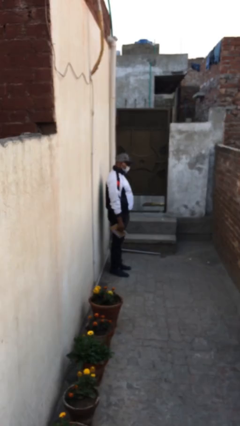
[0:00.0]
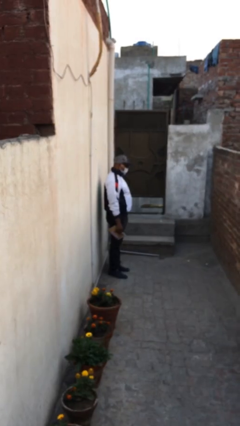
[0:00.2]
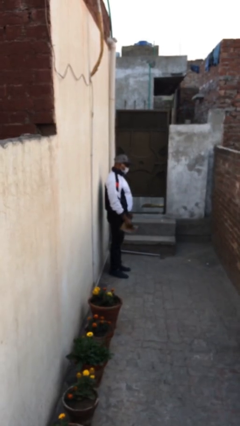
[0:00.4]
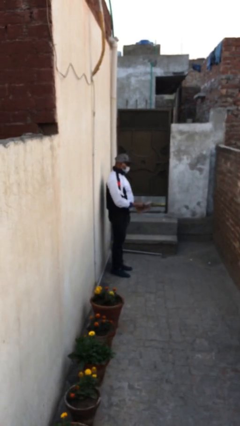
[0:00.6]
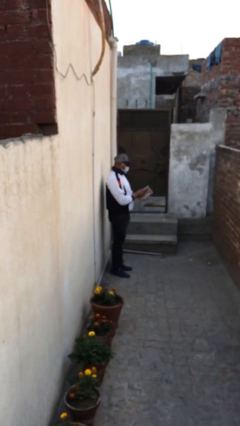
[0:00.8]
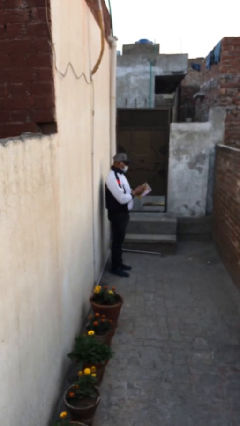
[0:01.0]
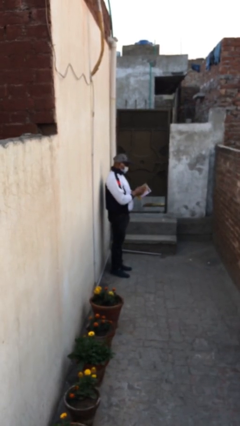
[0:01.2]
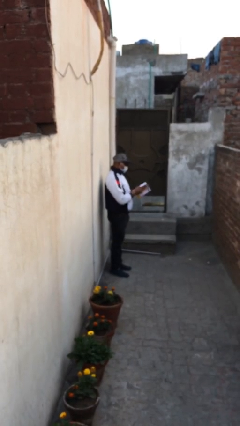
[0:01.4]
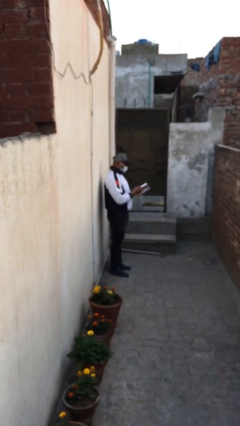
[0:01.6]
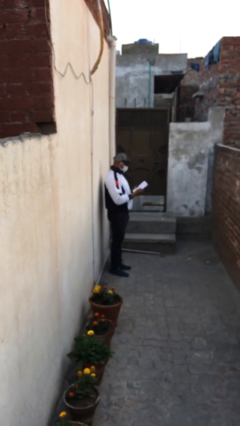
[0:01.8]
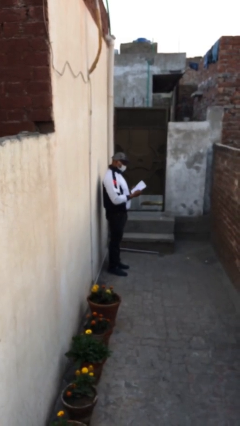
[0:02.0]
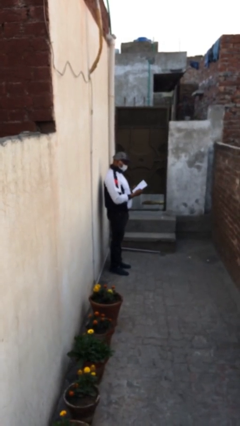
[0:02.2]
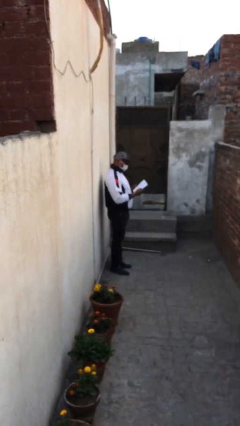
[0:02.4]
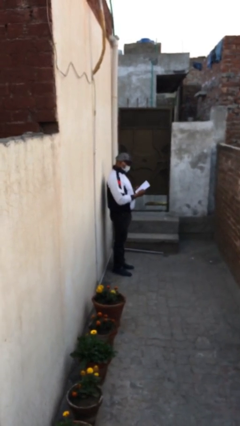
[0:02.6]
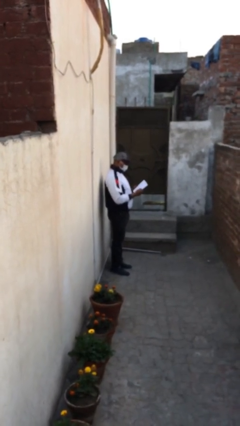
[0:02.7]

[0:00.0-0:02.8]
person reads document

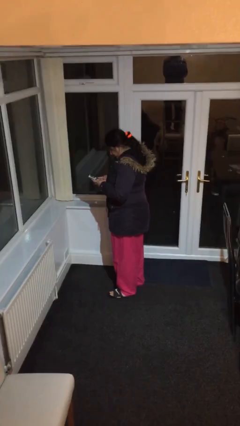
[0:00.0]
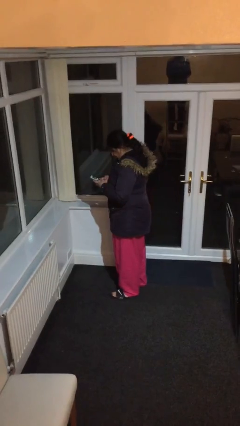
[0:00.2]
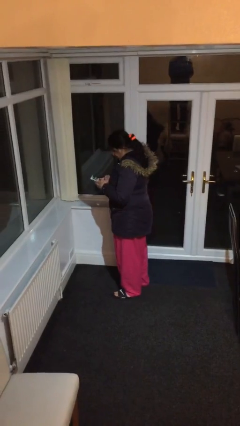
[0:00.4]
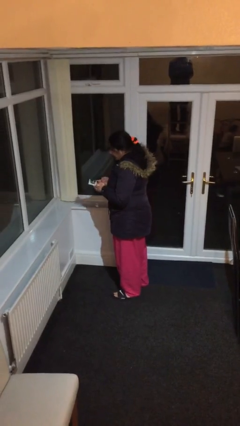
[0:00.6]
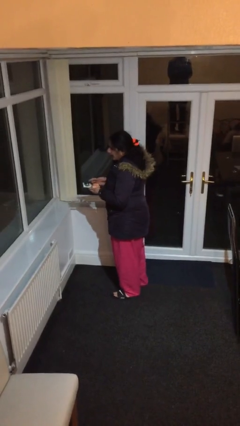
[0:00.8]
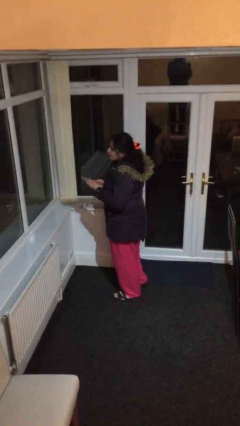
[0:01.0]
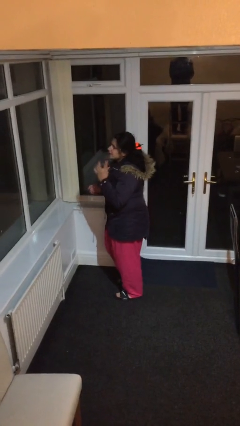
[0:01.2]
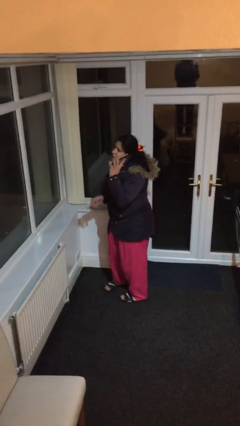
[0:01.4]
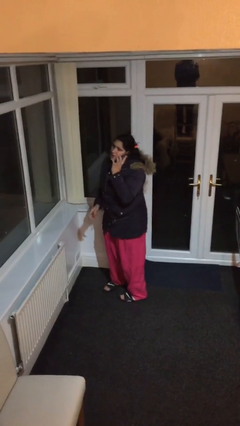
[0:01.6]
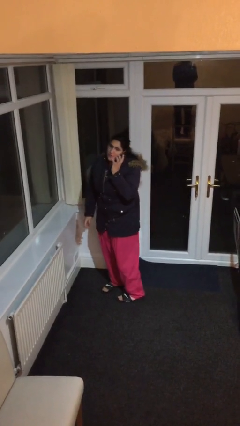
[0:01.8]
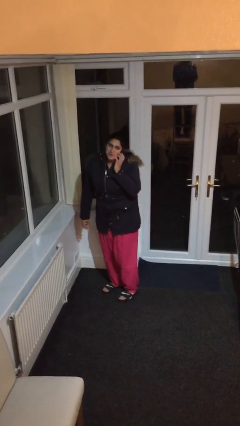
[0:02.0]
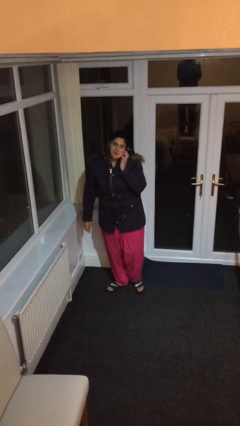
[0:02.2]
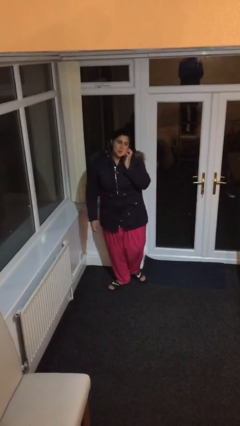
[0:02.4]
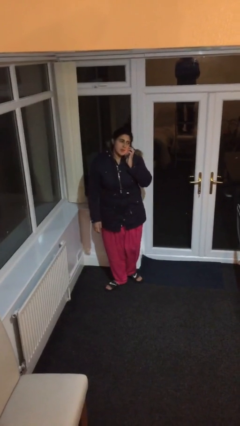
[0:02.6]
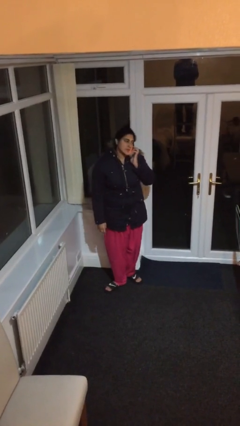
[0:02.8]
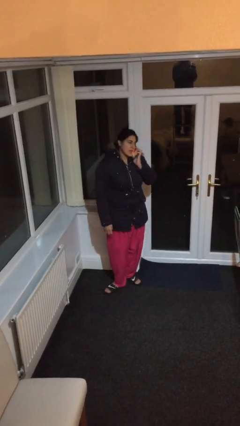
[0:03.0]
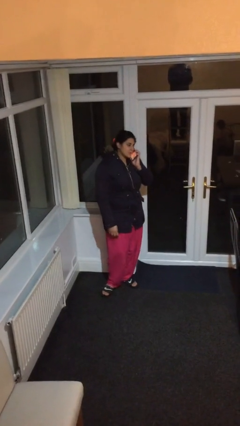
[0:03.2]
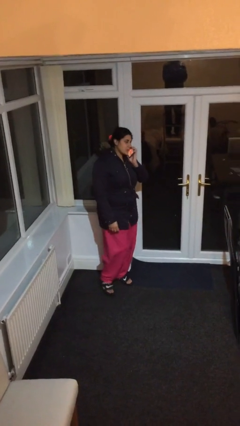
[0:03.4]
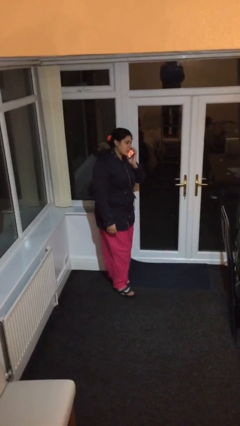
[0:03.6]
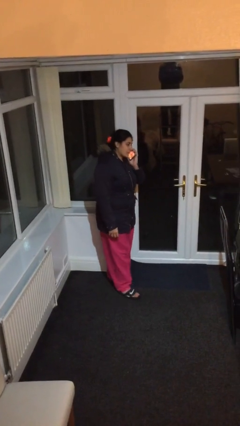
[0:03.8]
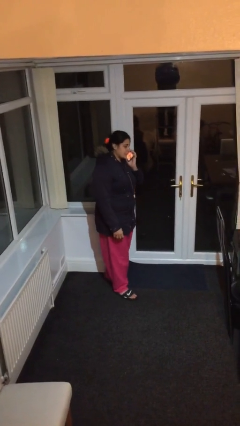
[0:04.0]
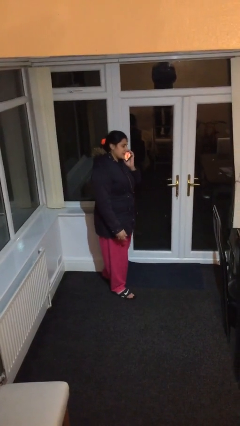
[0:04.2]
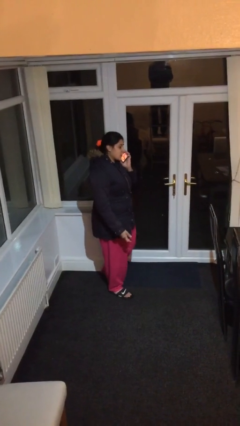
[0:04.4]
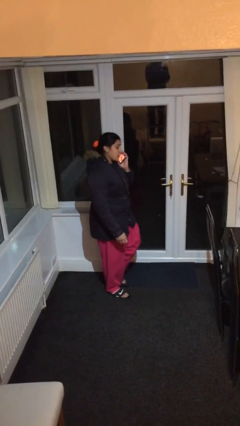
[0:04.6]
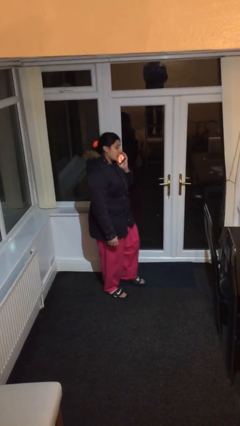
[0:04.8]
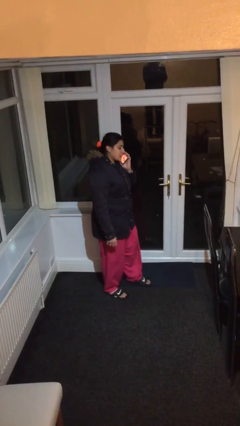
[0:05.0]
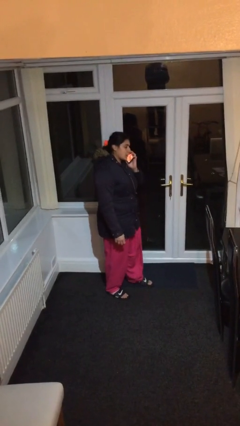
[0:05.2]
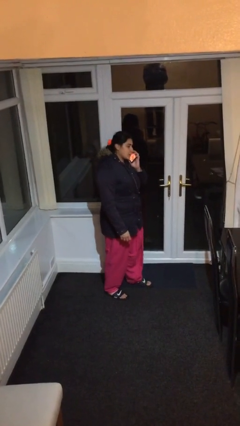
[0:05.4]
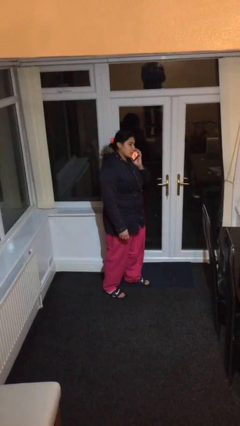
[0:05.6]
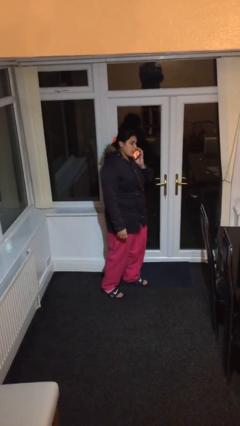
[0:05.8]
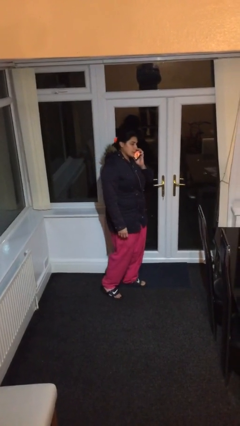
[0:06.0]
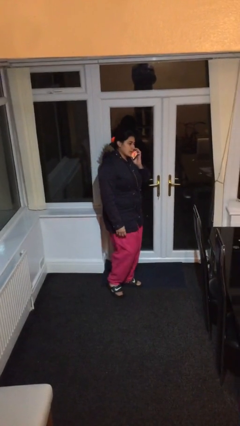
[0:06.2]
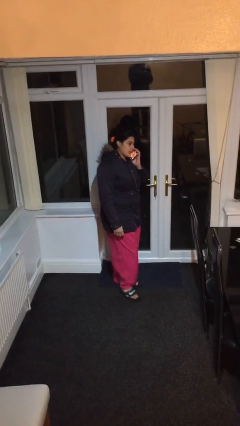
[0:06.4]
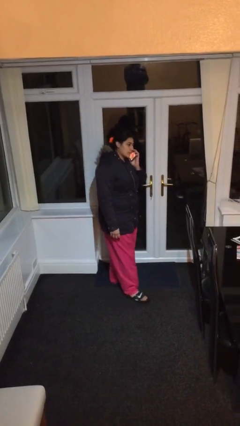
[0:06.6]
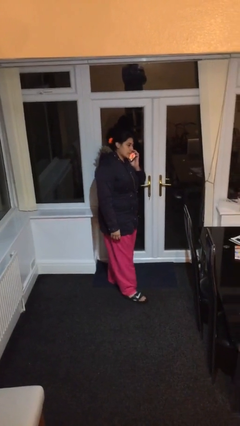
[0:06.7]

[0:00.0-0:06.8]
person talks on phone

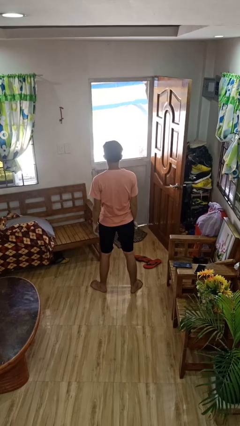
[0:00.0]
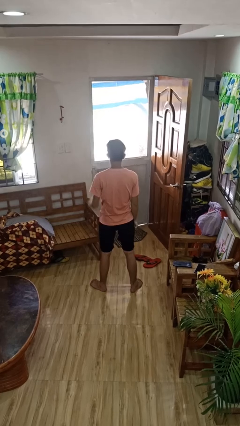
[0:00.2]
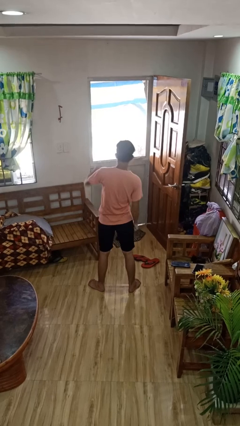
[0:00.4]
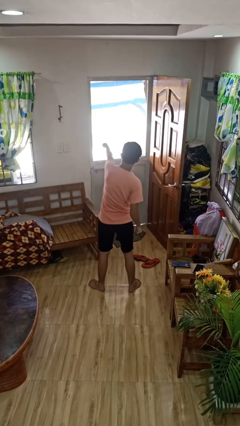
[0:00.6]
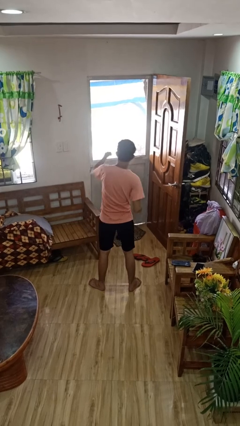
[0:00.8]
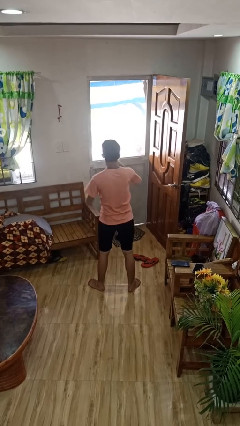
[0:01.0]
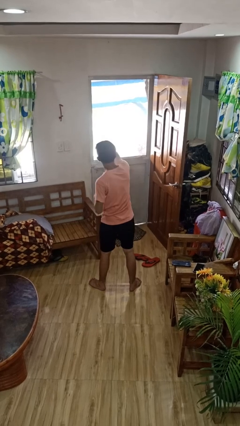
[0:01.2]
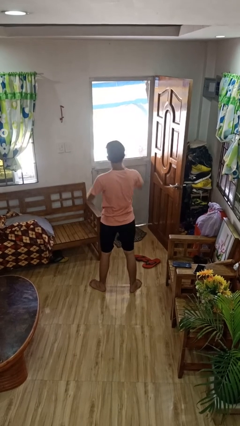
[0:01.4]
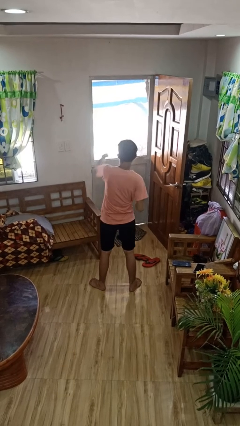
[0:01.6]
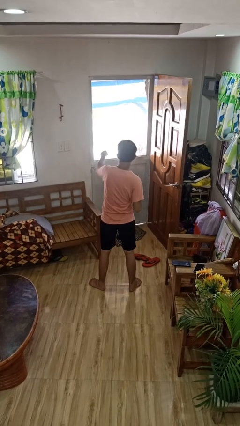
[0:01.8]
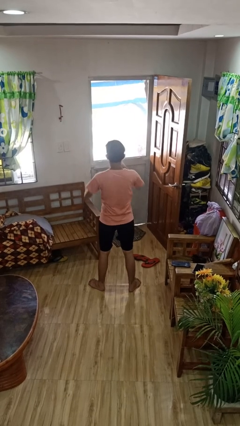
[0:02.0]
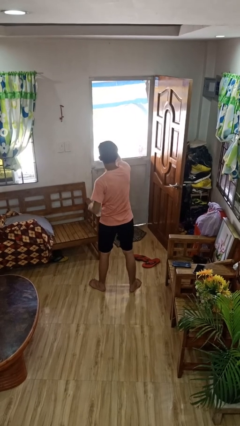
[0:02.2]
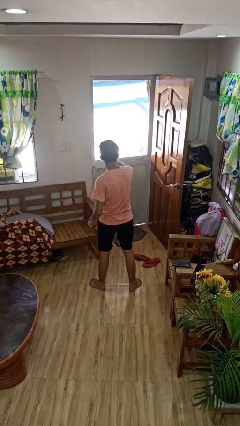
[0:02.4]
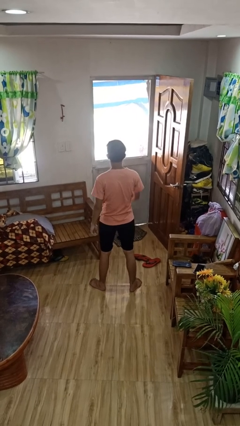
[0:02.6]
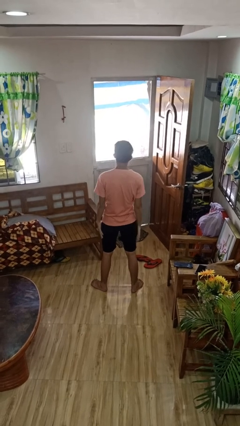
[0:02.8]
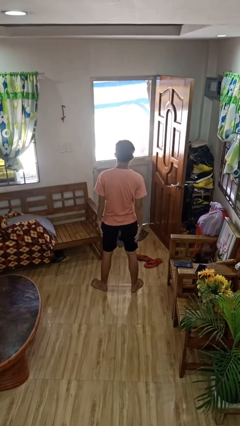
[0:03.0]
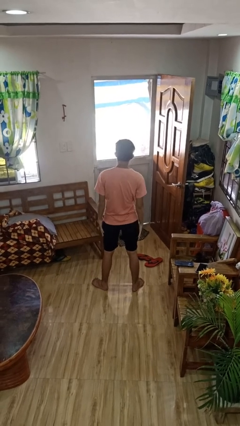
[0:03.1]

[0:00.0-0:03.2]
person punches

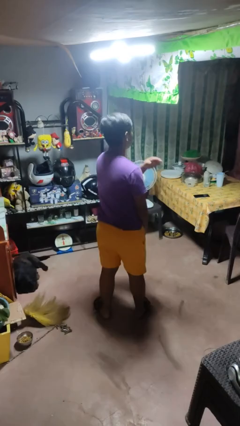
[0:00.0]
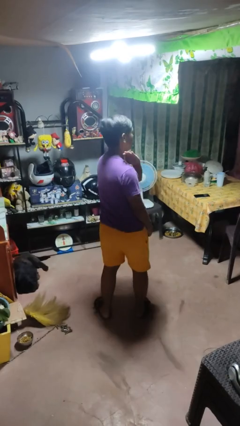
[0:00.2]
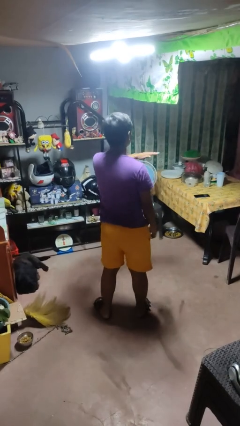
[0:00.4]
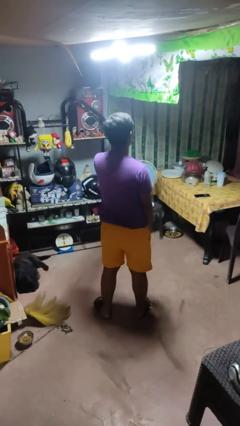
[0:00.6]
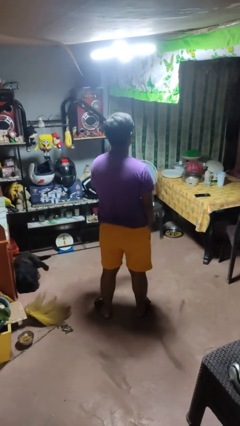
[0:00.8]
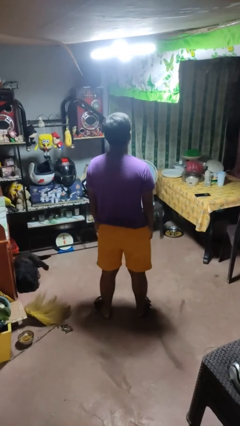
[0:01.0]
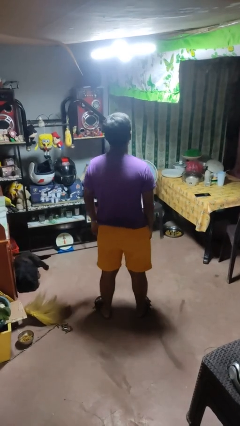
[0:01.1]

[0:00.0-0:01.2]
person karate chop

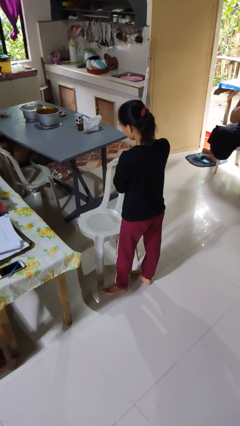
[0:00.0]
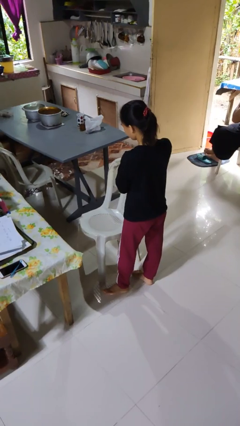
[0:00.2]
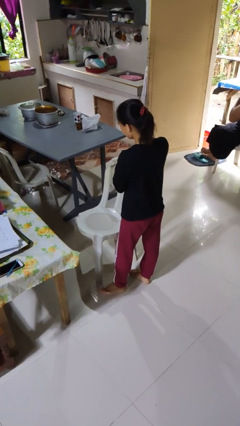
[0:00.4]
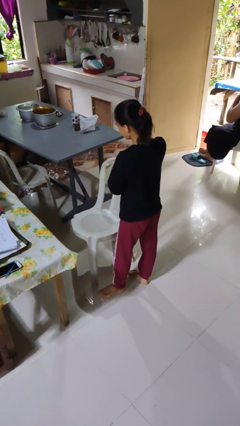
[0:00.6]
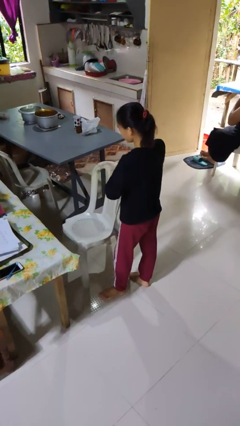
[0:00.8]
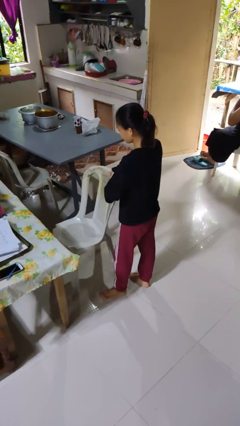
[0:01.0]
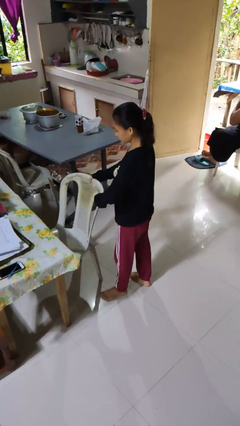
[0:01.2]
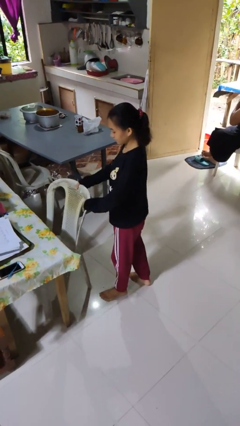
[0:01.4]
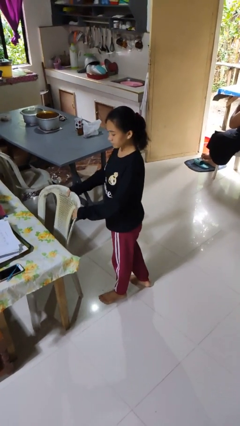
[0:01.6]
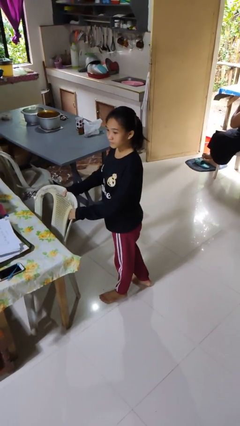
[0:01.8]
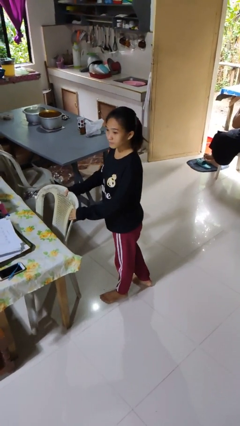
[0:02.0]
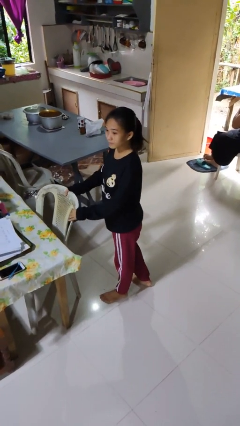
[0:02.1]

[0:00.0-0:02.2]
person pushes in chair

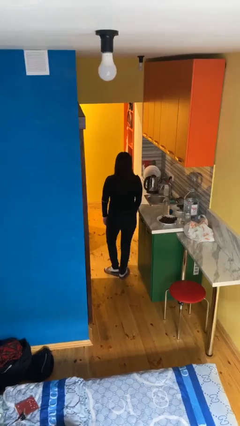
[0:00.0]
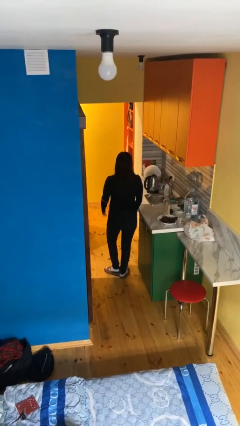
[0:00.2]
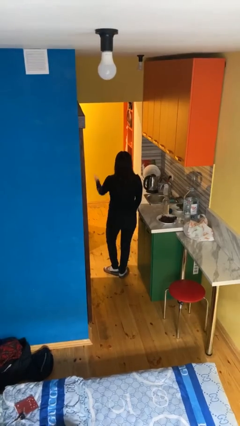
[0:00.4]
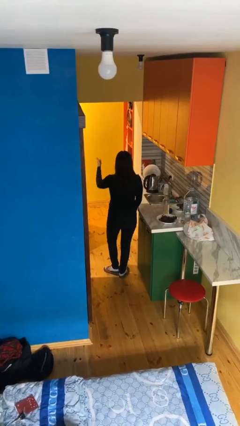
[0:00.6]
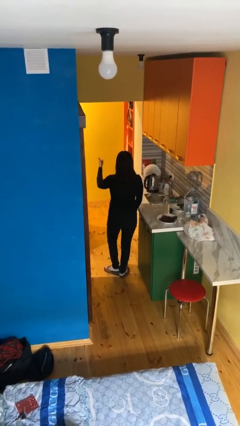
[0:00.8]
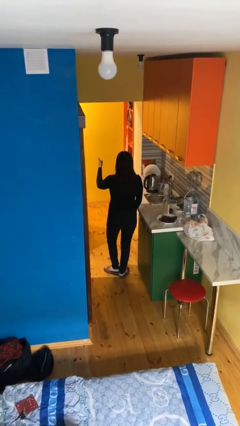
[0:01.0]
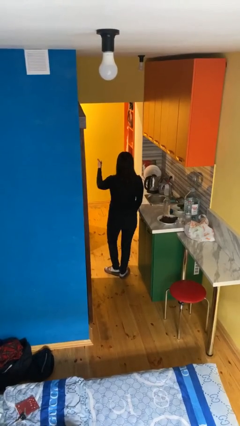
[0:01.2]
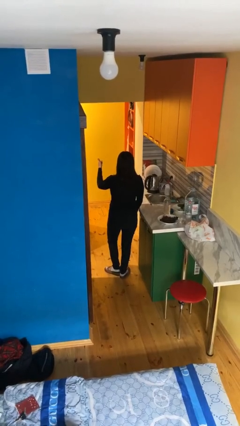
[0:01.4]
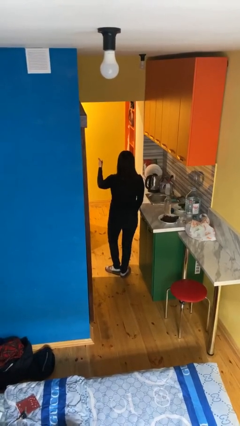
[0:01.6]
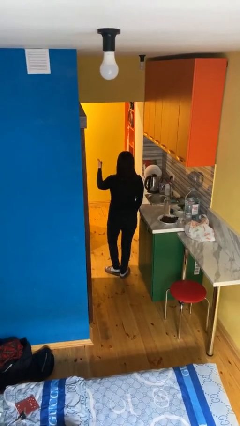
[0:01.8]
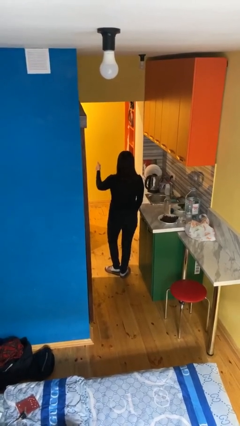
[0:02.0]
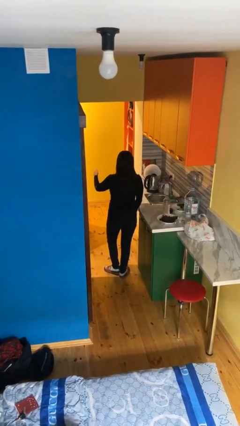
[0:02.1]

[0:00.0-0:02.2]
person gestures thumbs up
